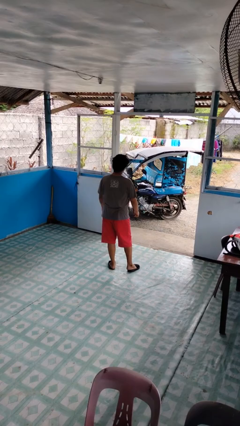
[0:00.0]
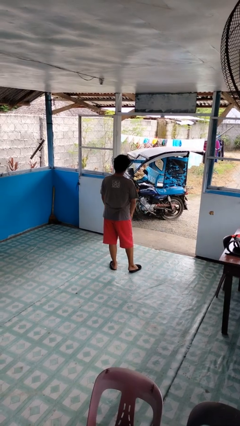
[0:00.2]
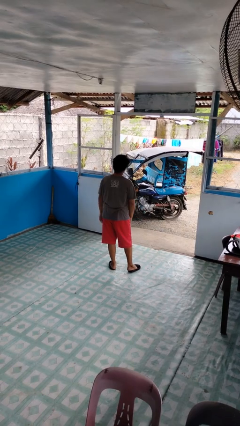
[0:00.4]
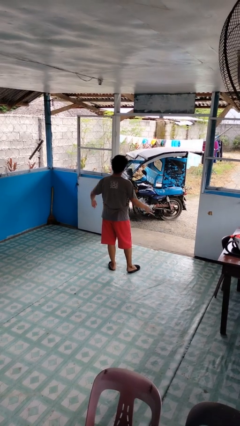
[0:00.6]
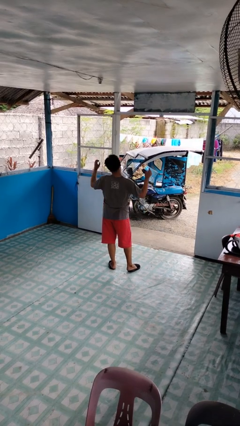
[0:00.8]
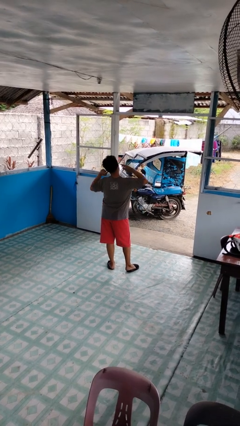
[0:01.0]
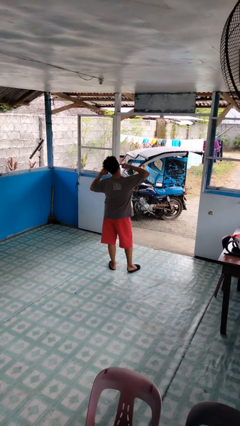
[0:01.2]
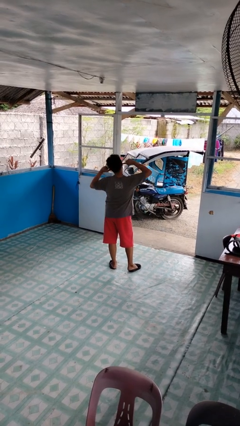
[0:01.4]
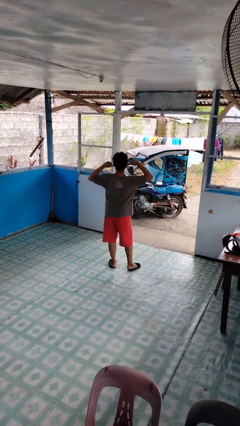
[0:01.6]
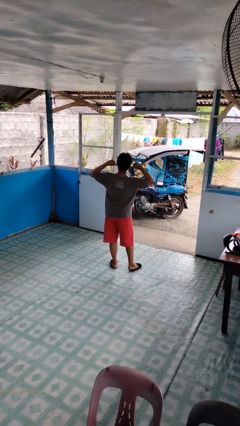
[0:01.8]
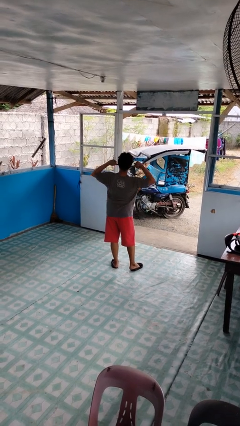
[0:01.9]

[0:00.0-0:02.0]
person puts fingers in ear

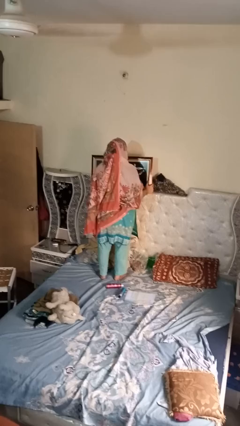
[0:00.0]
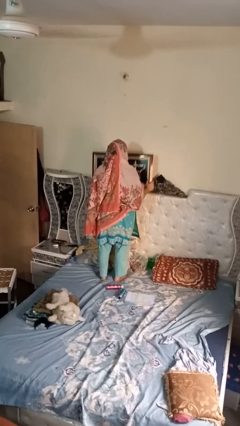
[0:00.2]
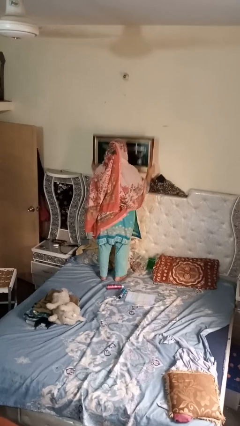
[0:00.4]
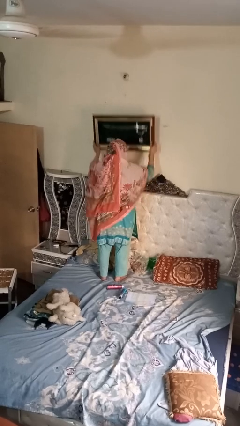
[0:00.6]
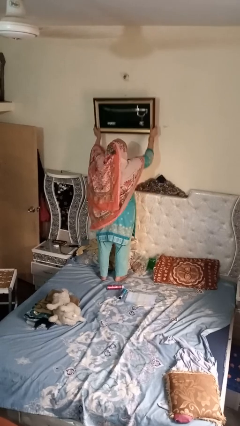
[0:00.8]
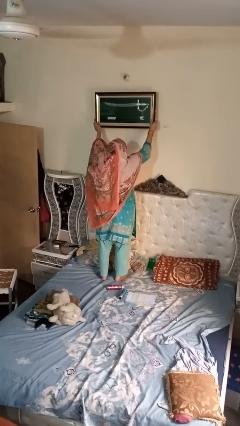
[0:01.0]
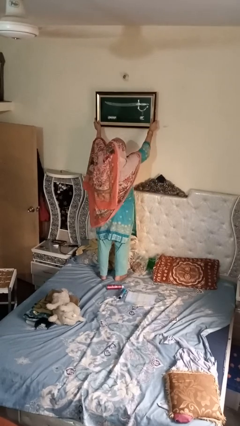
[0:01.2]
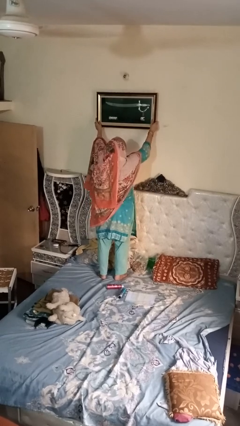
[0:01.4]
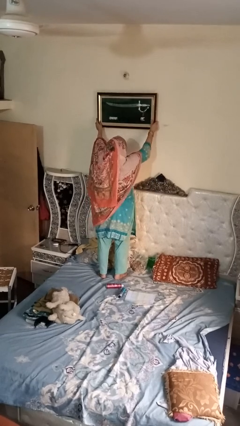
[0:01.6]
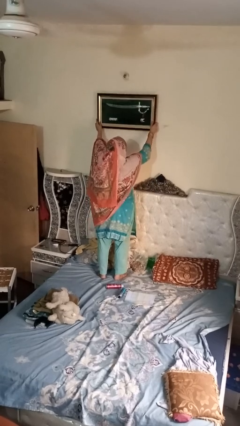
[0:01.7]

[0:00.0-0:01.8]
person takes down picture frame

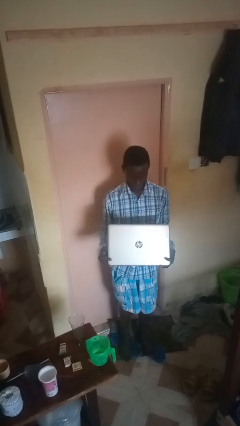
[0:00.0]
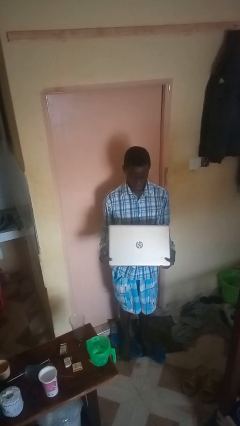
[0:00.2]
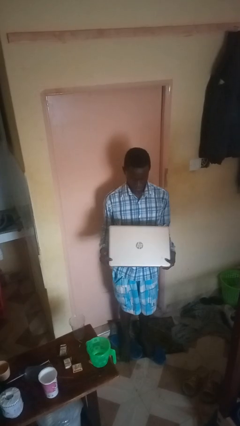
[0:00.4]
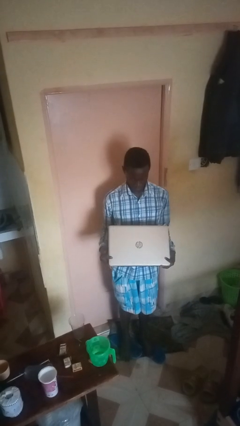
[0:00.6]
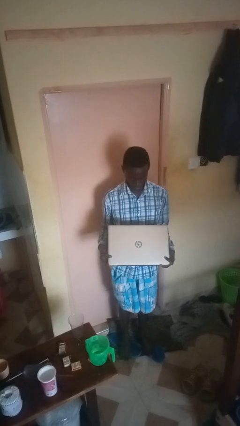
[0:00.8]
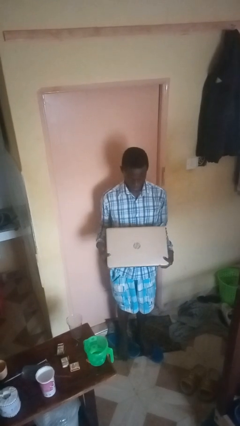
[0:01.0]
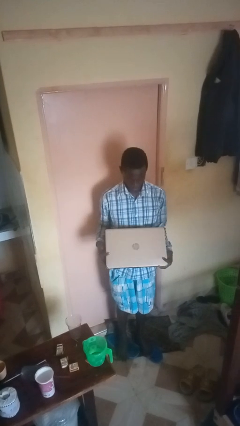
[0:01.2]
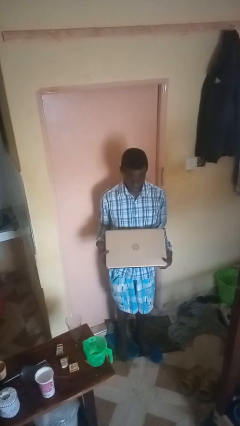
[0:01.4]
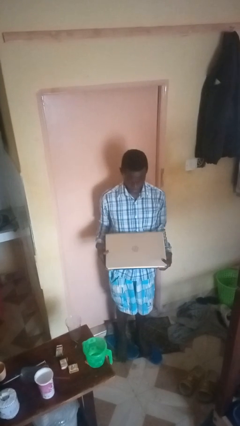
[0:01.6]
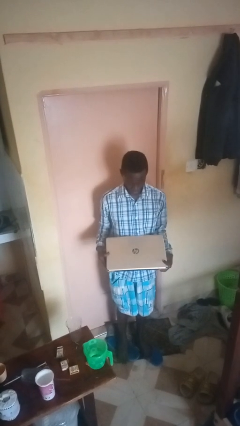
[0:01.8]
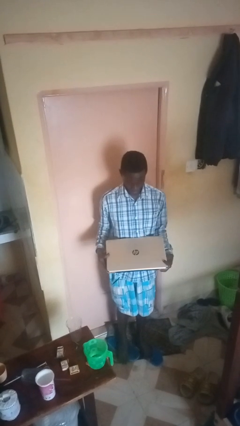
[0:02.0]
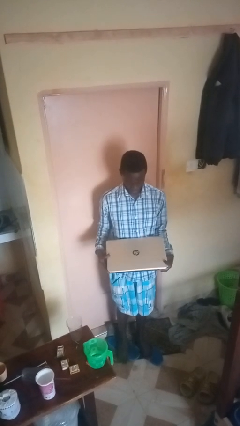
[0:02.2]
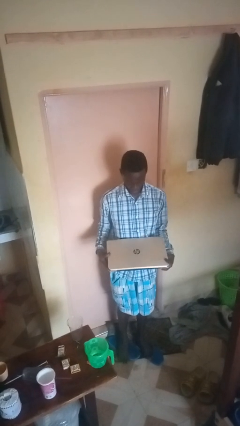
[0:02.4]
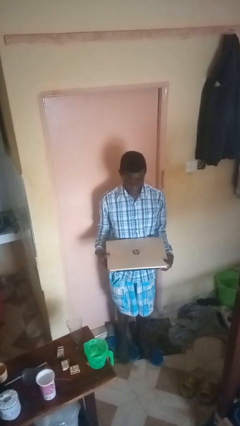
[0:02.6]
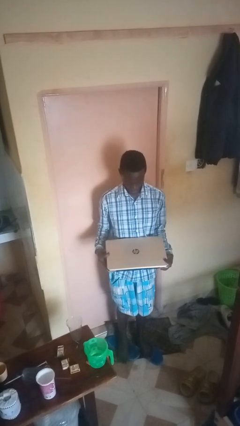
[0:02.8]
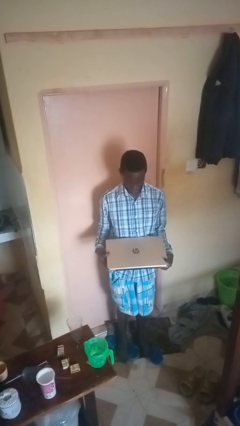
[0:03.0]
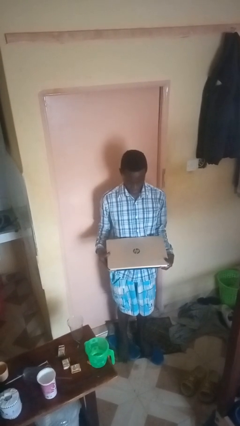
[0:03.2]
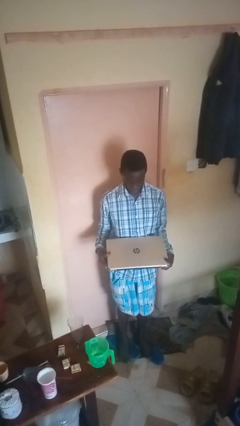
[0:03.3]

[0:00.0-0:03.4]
person closes laptop

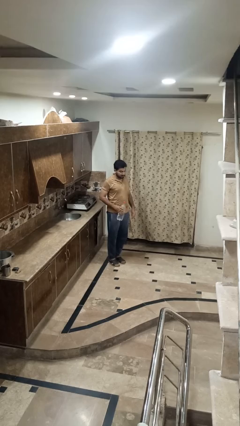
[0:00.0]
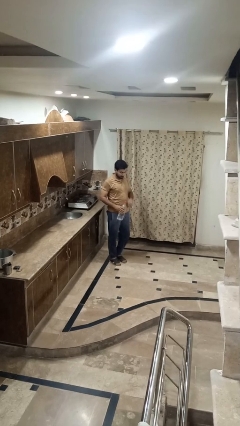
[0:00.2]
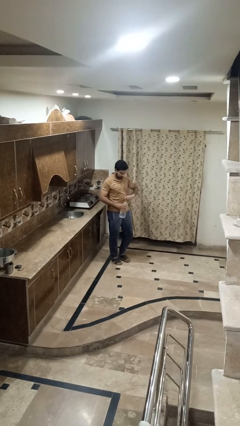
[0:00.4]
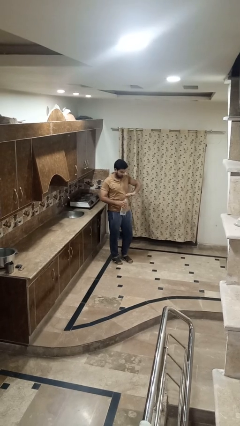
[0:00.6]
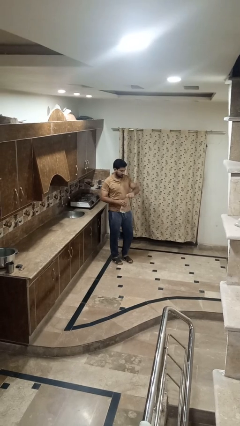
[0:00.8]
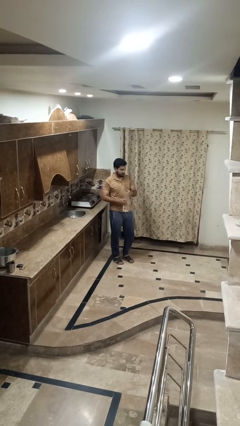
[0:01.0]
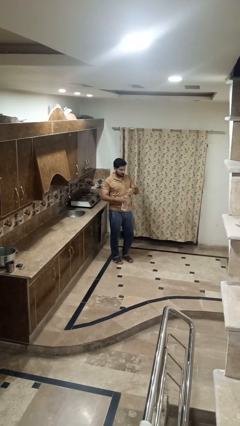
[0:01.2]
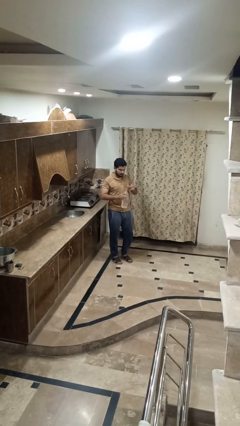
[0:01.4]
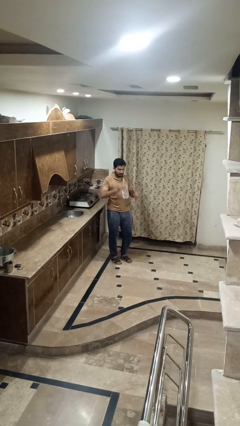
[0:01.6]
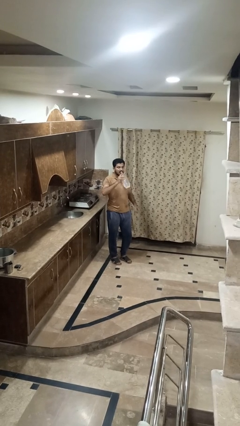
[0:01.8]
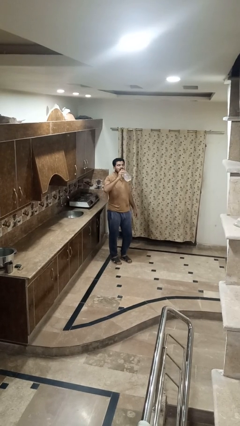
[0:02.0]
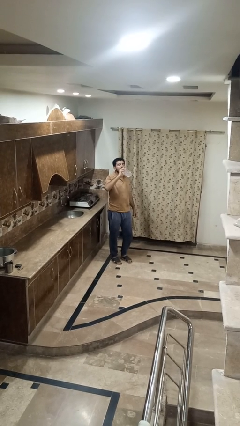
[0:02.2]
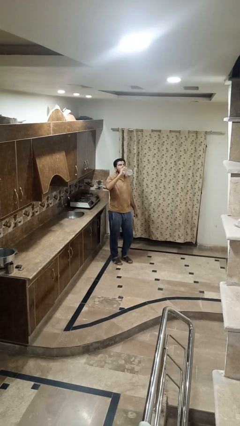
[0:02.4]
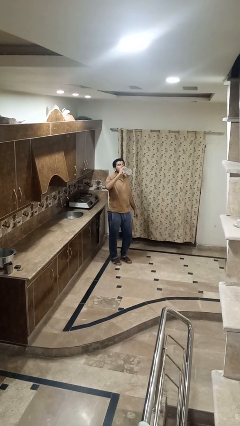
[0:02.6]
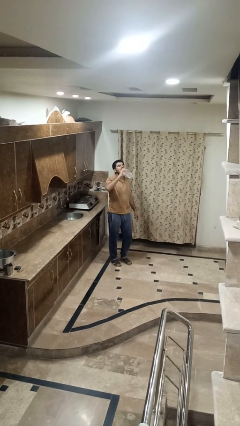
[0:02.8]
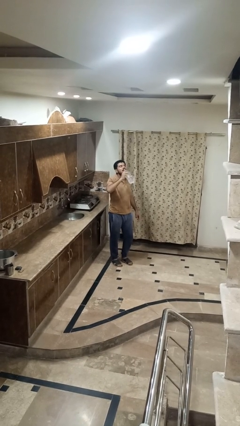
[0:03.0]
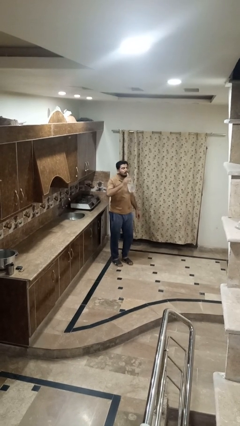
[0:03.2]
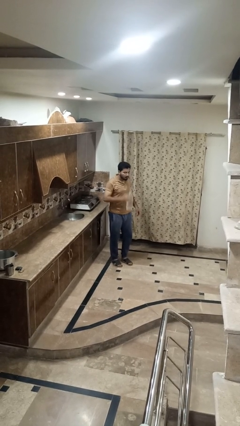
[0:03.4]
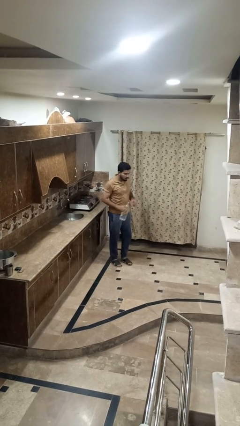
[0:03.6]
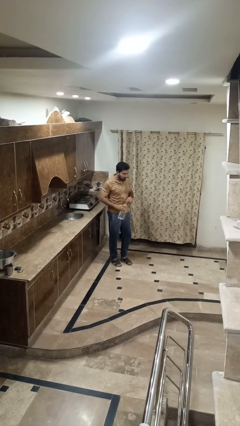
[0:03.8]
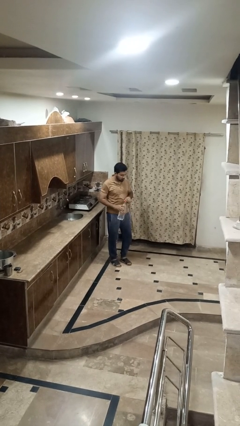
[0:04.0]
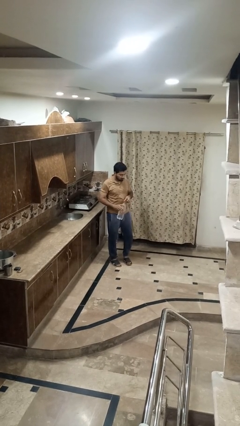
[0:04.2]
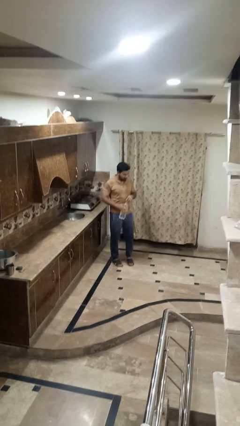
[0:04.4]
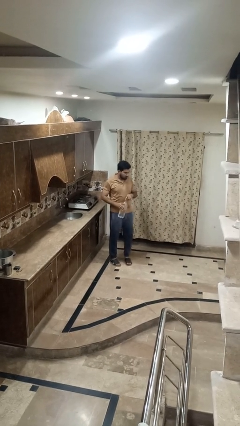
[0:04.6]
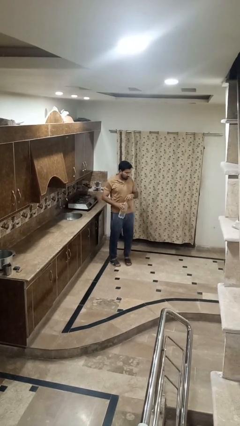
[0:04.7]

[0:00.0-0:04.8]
person drinks from bottle

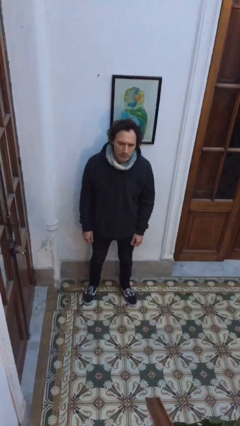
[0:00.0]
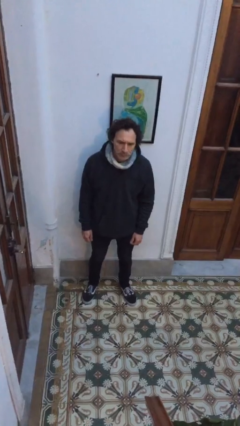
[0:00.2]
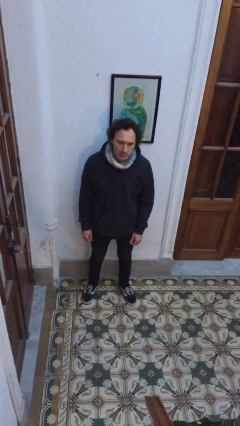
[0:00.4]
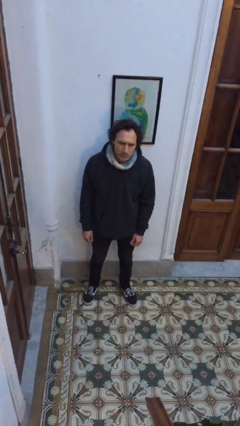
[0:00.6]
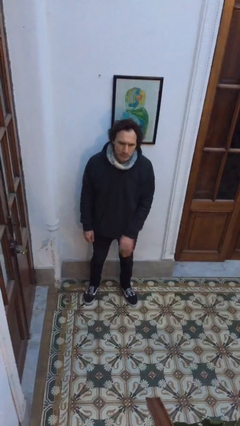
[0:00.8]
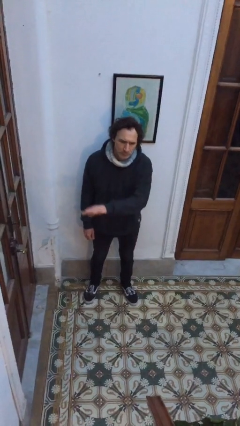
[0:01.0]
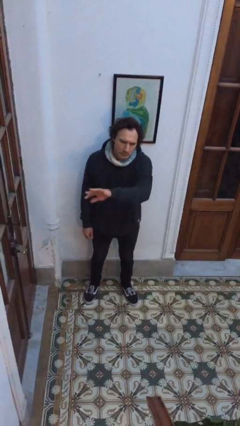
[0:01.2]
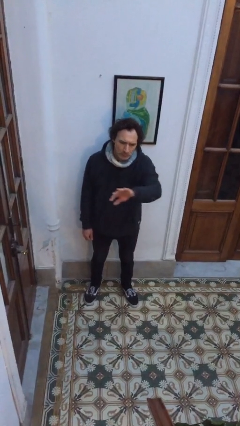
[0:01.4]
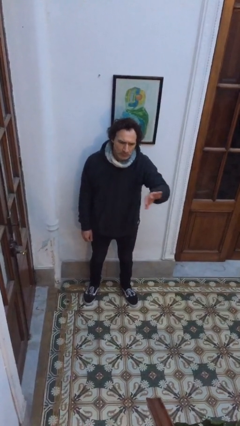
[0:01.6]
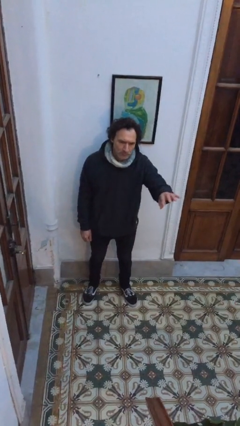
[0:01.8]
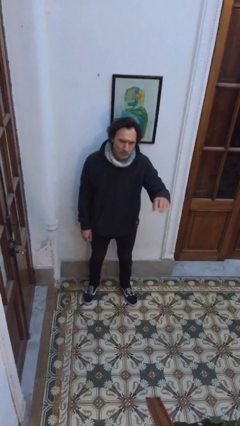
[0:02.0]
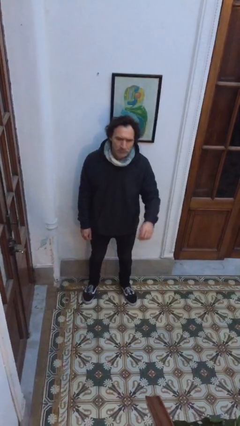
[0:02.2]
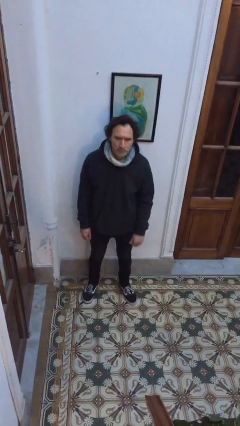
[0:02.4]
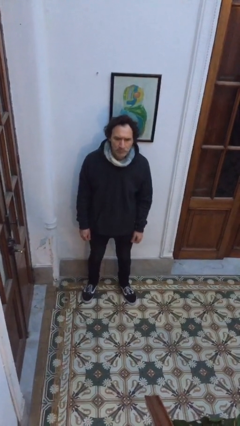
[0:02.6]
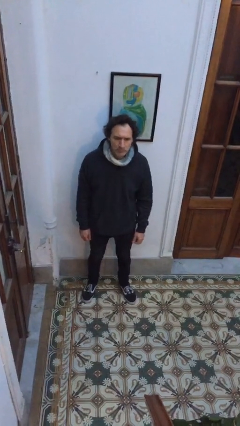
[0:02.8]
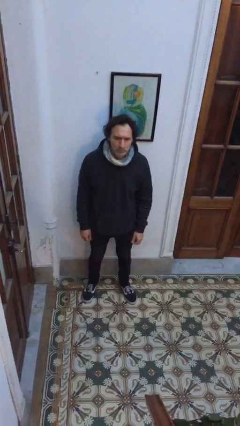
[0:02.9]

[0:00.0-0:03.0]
person gestures swipe left

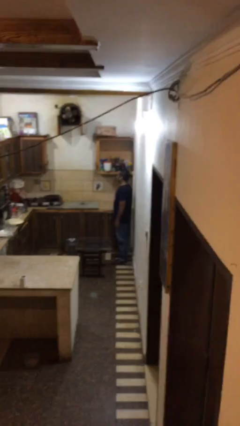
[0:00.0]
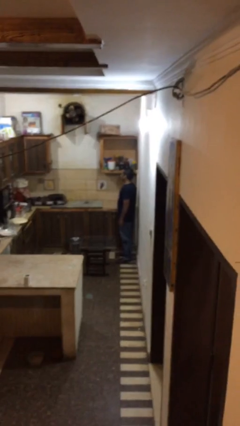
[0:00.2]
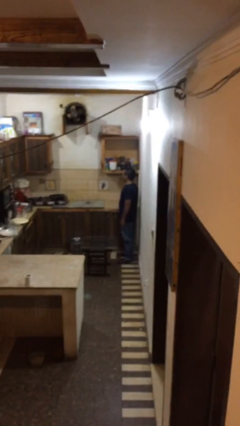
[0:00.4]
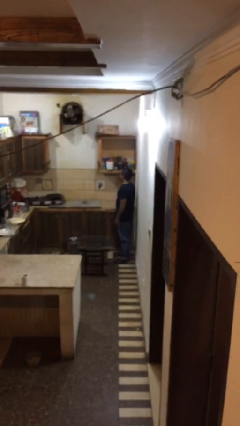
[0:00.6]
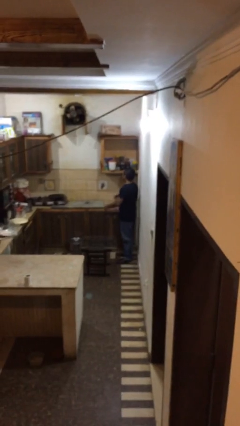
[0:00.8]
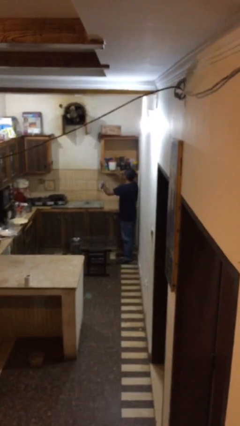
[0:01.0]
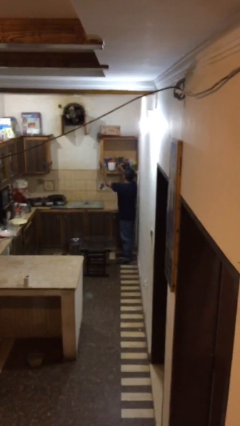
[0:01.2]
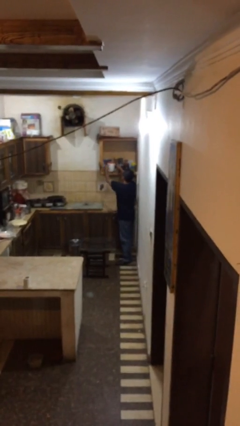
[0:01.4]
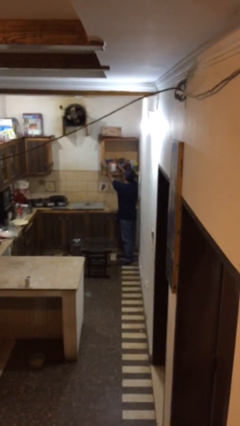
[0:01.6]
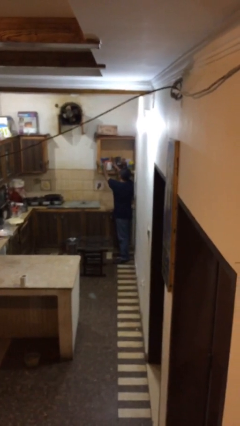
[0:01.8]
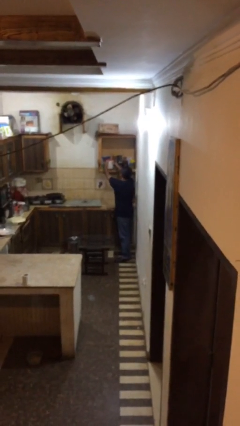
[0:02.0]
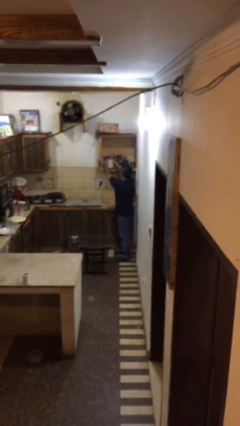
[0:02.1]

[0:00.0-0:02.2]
person picks up object from shelf
